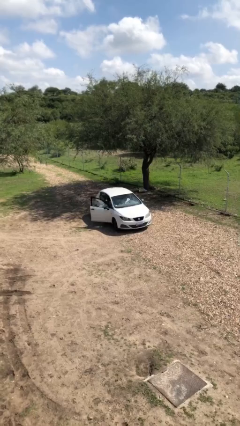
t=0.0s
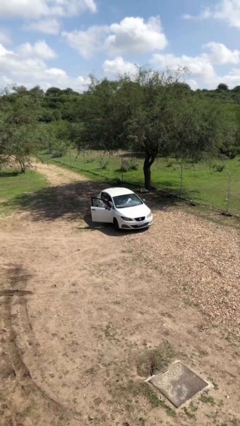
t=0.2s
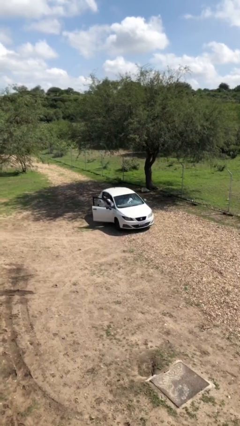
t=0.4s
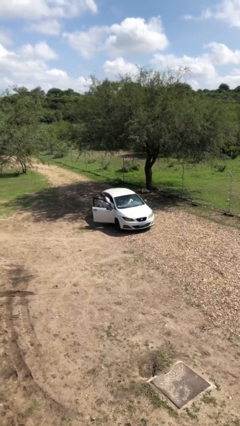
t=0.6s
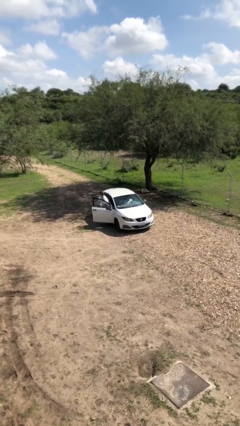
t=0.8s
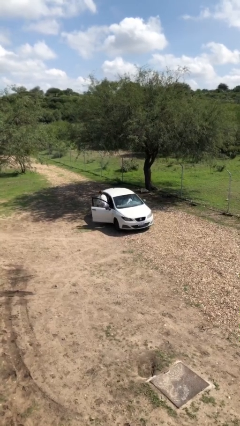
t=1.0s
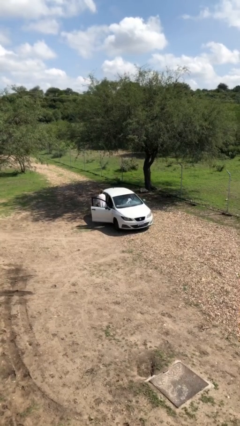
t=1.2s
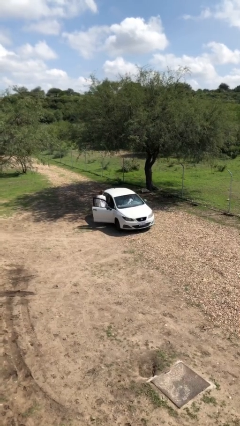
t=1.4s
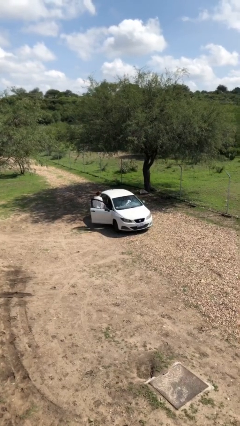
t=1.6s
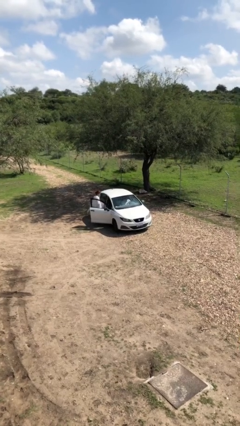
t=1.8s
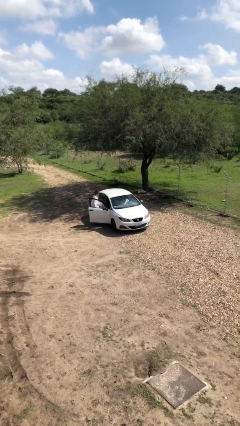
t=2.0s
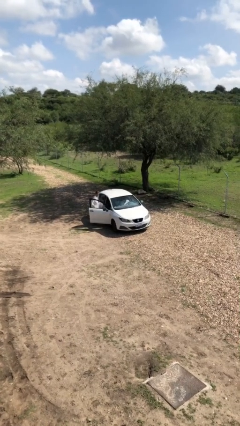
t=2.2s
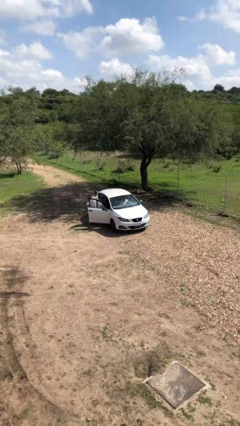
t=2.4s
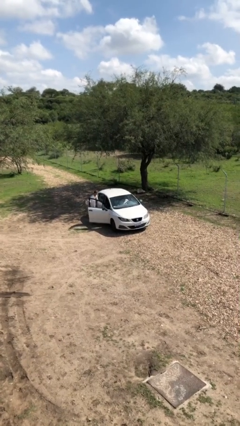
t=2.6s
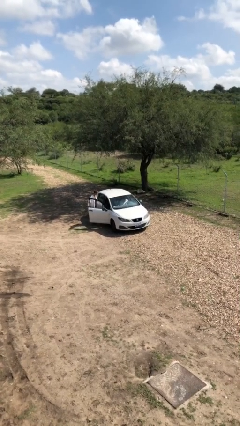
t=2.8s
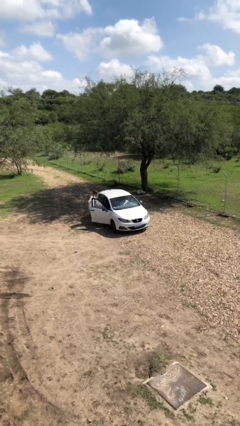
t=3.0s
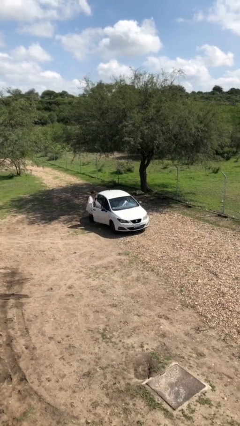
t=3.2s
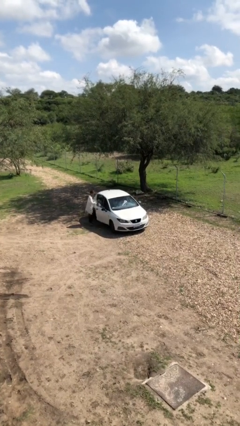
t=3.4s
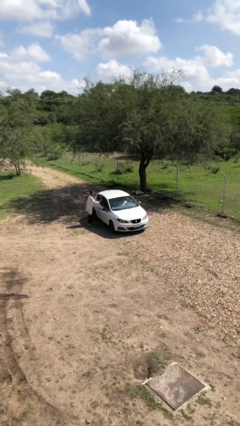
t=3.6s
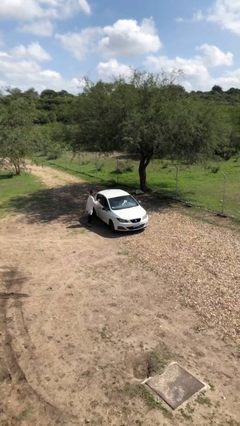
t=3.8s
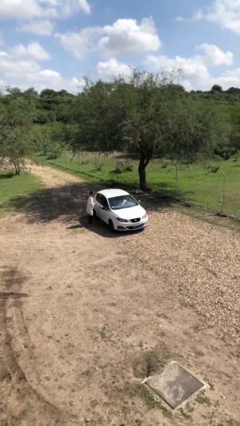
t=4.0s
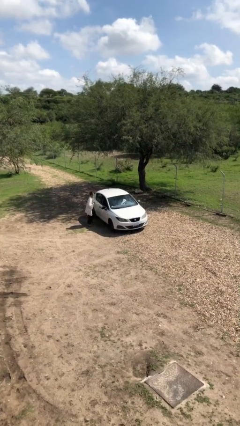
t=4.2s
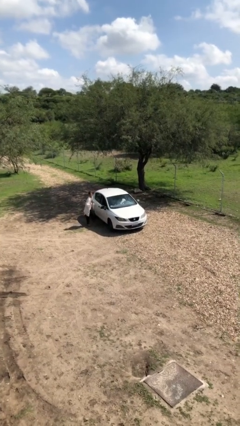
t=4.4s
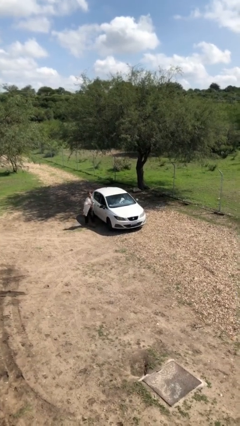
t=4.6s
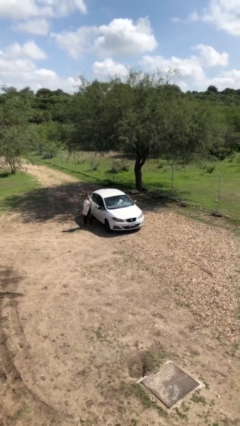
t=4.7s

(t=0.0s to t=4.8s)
car drops off person

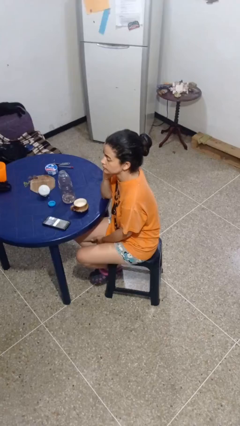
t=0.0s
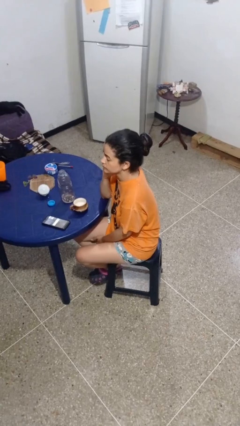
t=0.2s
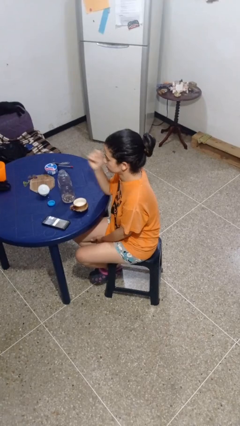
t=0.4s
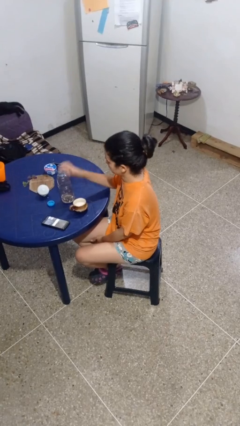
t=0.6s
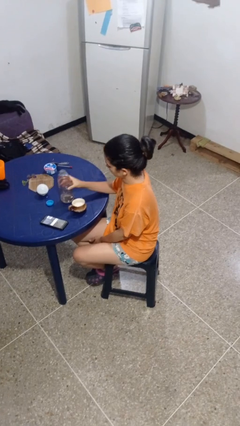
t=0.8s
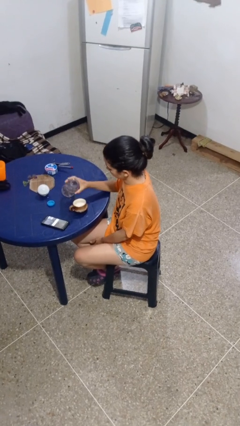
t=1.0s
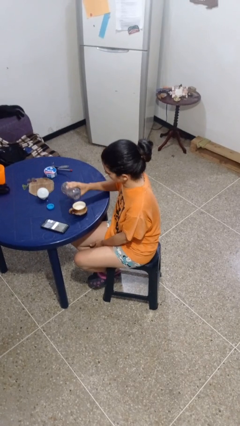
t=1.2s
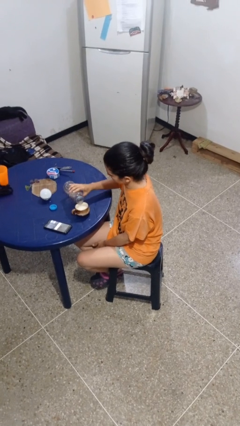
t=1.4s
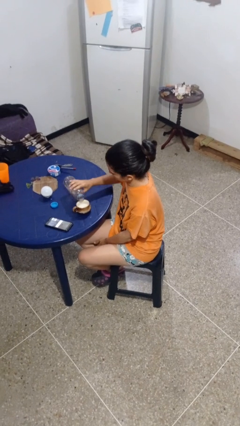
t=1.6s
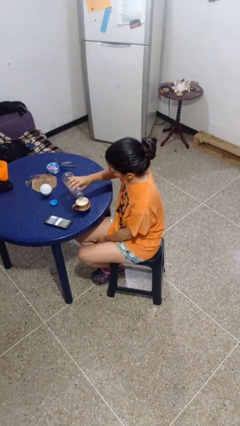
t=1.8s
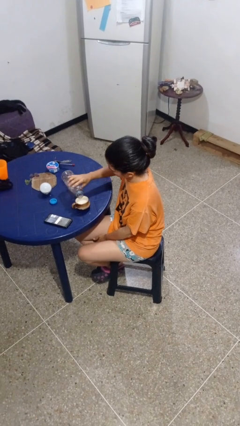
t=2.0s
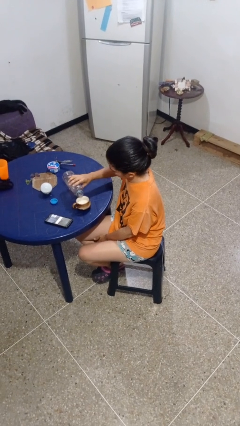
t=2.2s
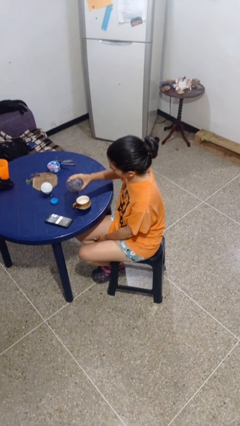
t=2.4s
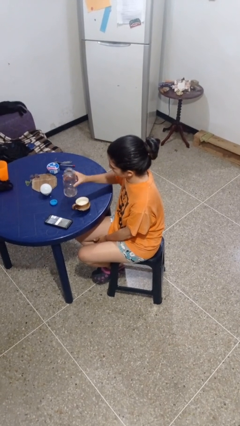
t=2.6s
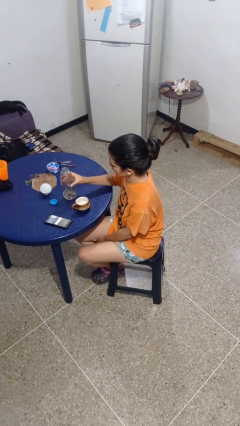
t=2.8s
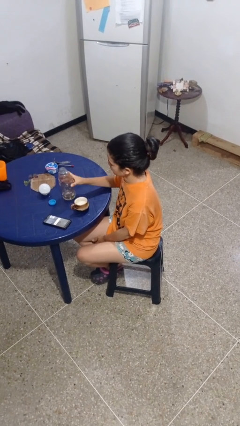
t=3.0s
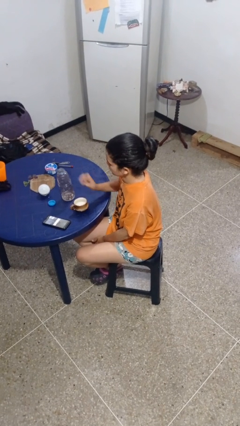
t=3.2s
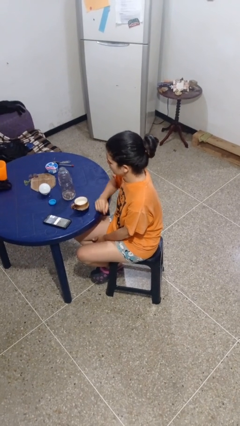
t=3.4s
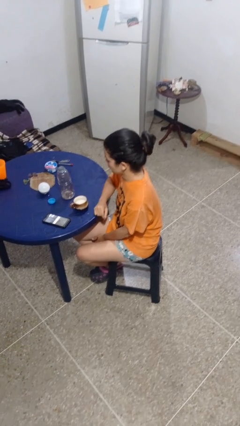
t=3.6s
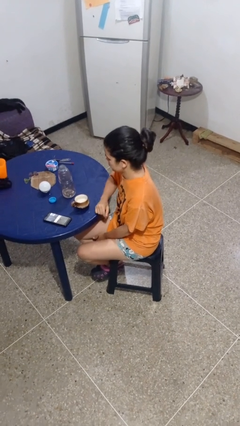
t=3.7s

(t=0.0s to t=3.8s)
person pours liquid into cup

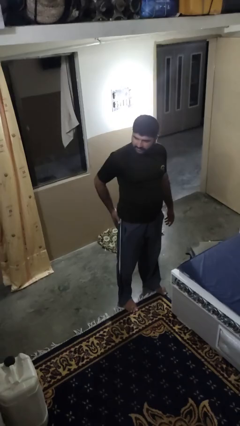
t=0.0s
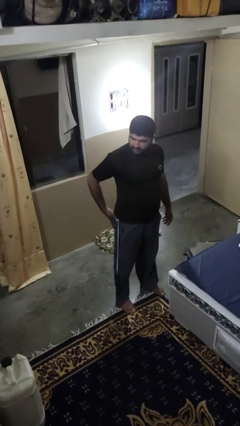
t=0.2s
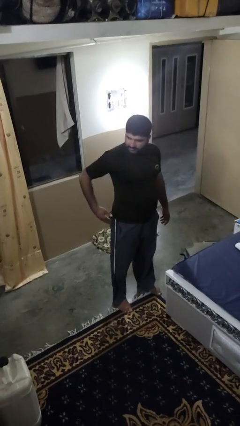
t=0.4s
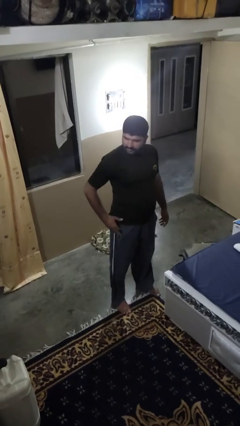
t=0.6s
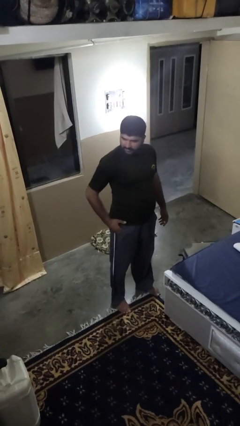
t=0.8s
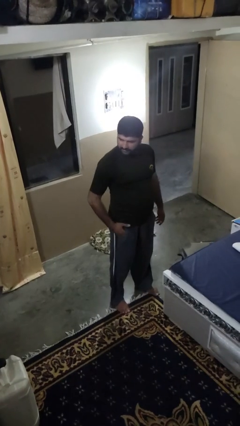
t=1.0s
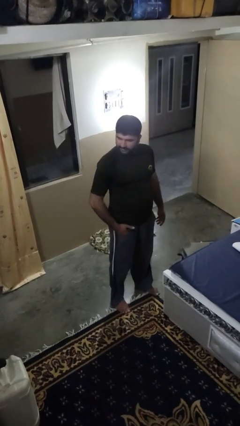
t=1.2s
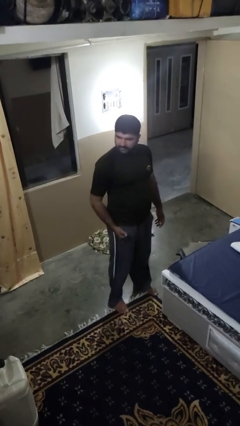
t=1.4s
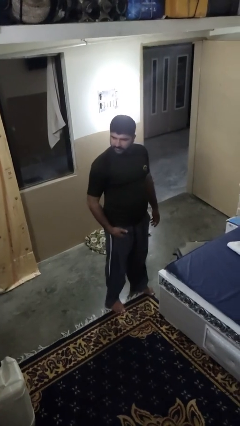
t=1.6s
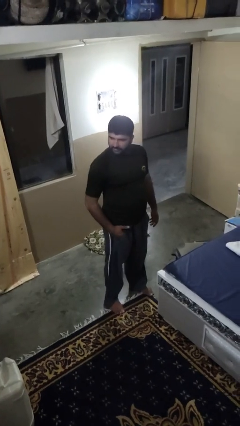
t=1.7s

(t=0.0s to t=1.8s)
person puts hands in back pockets

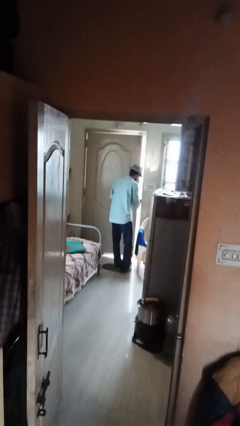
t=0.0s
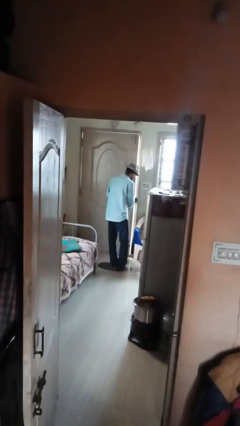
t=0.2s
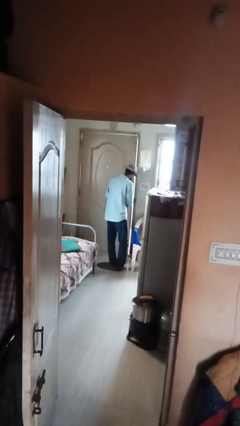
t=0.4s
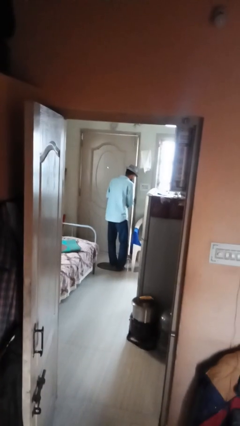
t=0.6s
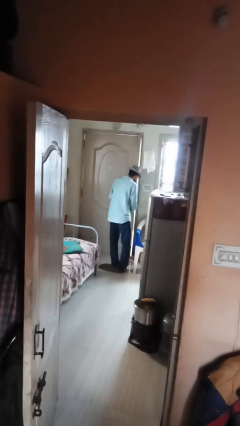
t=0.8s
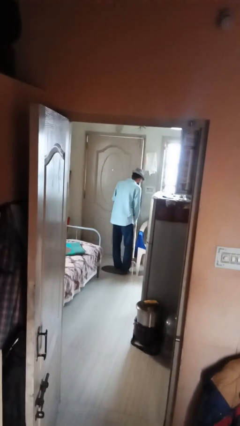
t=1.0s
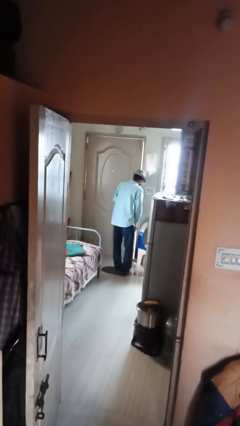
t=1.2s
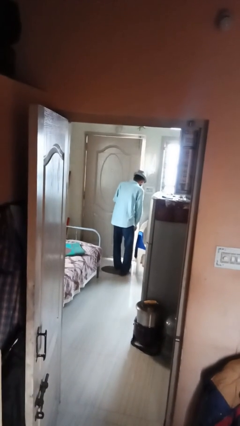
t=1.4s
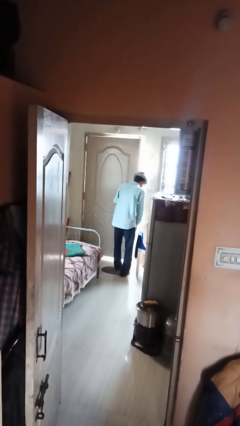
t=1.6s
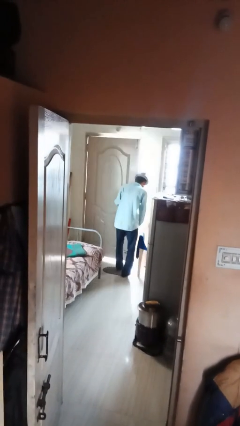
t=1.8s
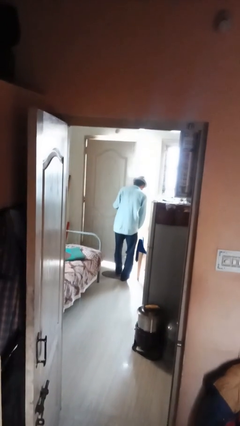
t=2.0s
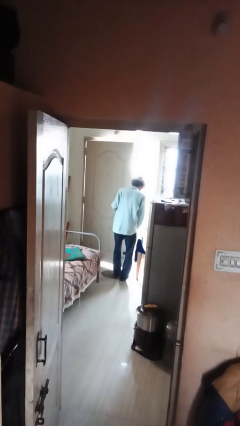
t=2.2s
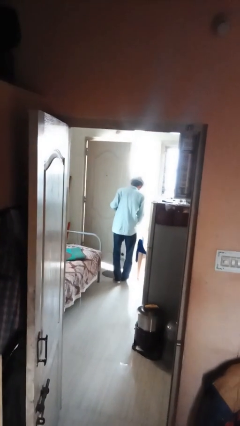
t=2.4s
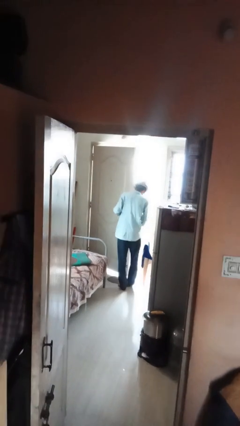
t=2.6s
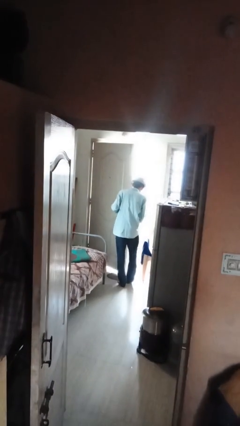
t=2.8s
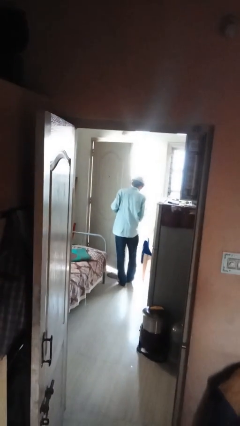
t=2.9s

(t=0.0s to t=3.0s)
person closes facility door

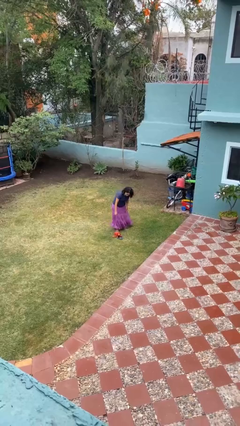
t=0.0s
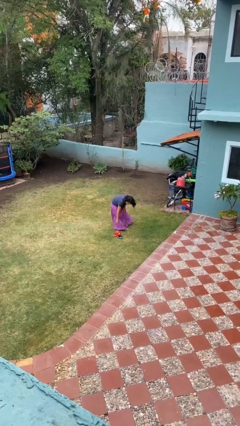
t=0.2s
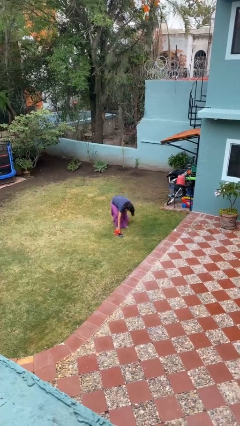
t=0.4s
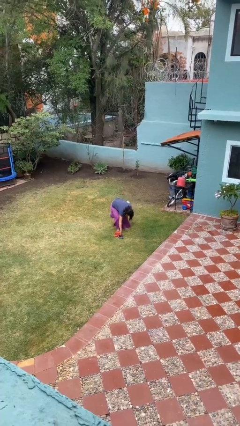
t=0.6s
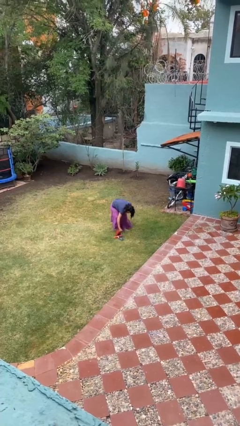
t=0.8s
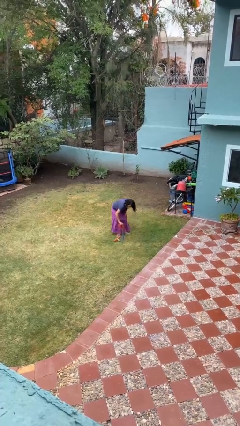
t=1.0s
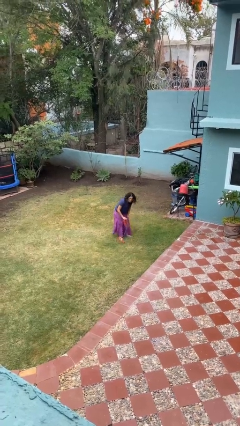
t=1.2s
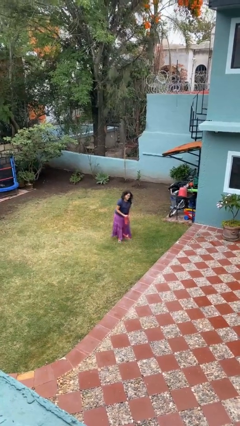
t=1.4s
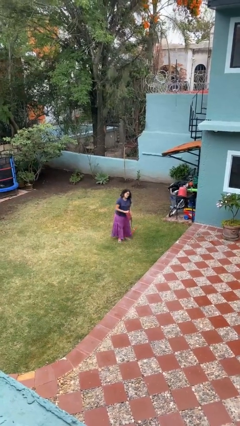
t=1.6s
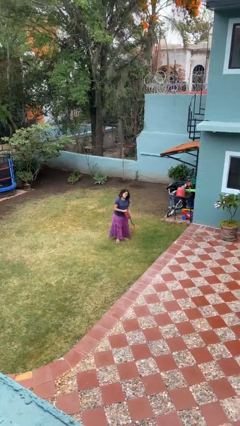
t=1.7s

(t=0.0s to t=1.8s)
person picks up object from floor

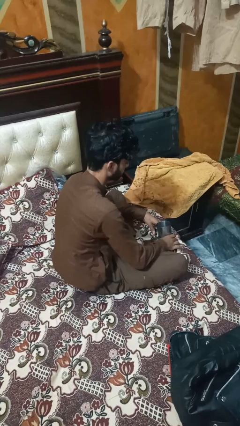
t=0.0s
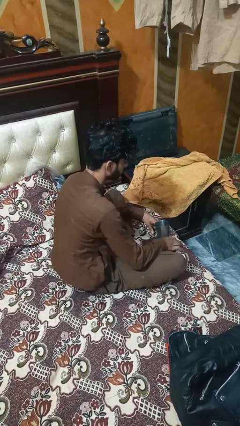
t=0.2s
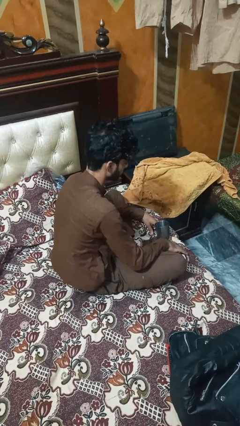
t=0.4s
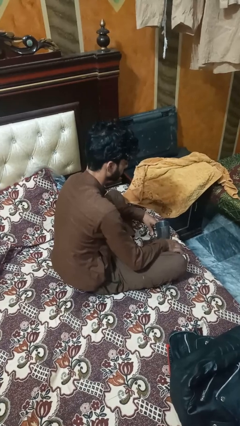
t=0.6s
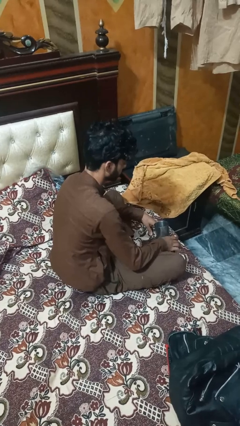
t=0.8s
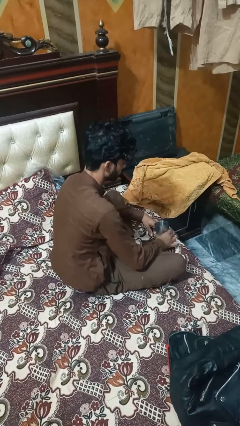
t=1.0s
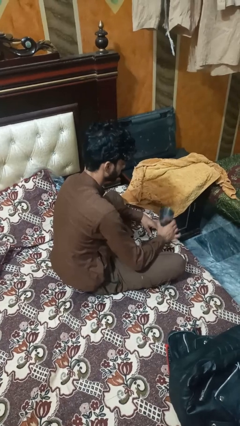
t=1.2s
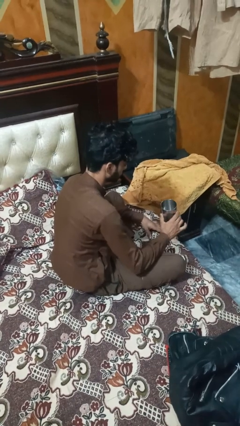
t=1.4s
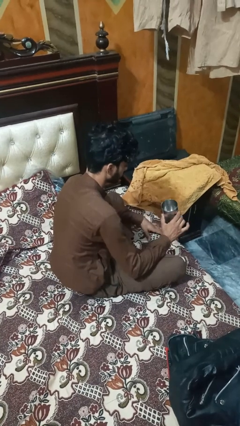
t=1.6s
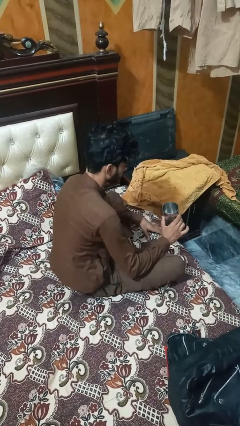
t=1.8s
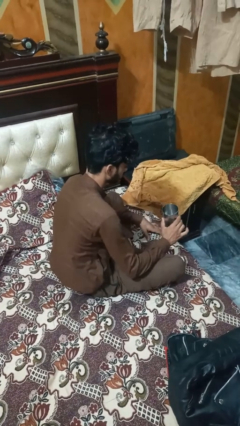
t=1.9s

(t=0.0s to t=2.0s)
person picks up object from table

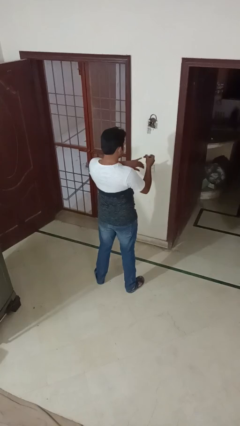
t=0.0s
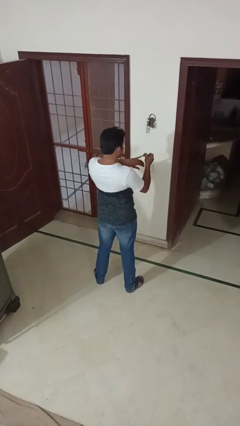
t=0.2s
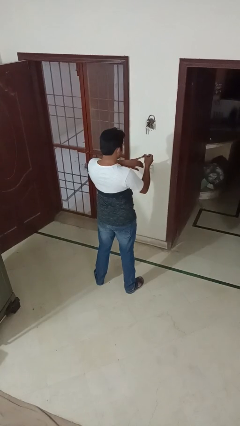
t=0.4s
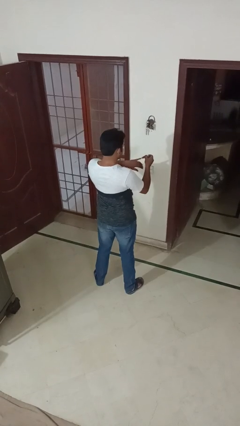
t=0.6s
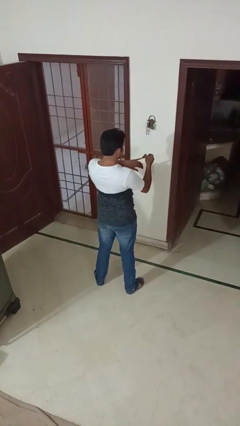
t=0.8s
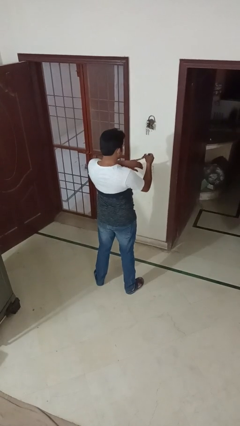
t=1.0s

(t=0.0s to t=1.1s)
person clips fingernails
